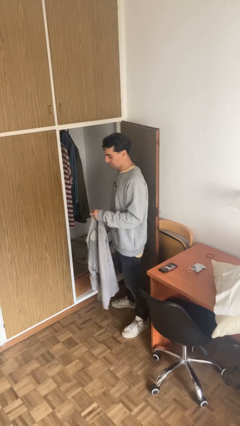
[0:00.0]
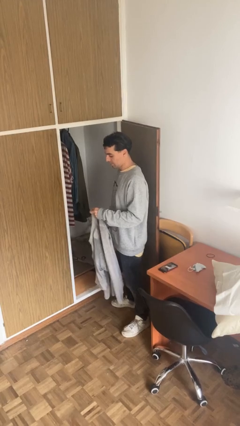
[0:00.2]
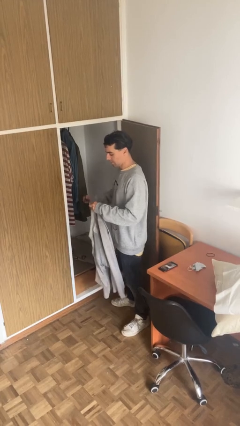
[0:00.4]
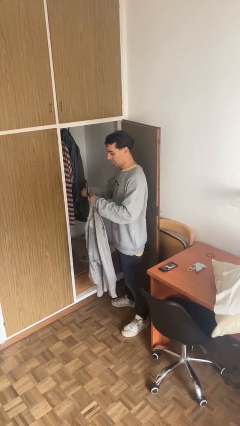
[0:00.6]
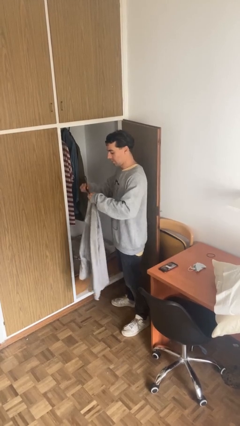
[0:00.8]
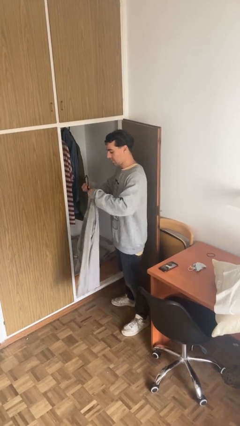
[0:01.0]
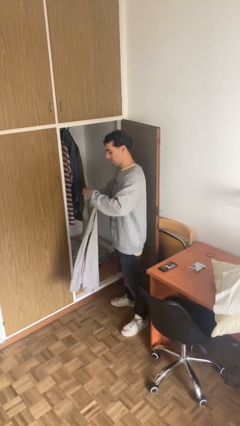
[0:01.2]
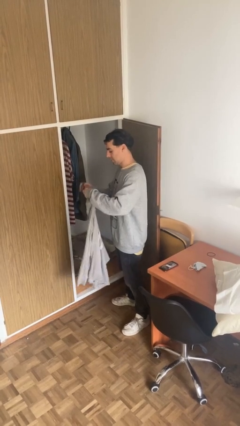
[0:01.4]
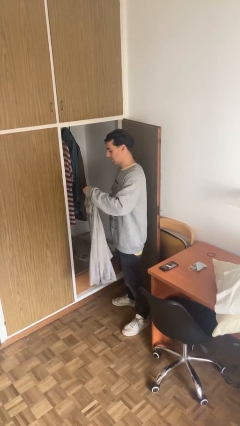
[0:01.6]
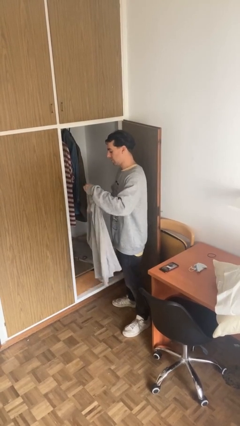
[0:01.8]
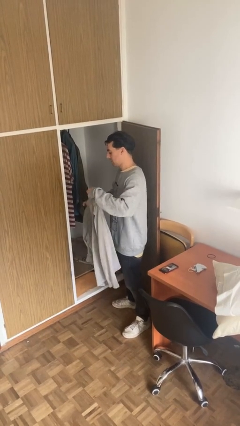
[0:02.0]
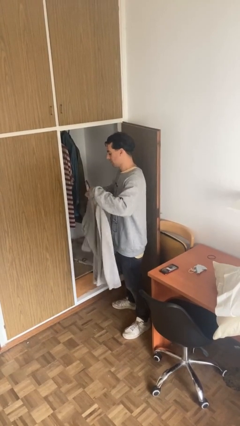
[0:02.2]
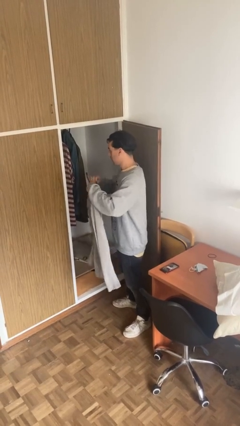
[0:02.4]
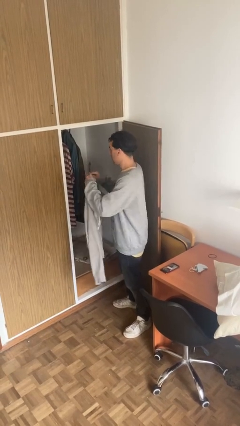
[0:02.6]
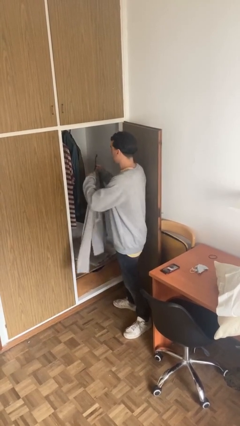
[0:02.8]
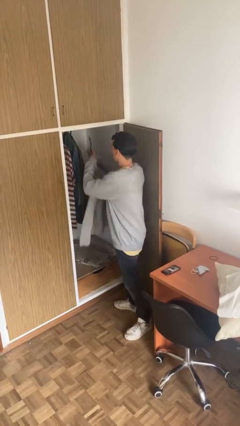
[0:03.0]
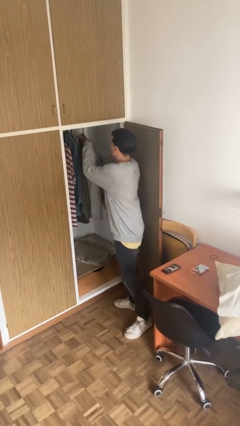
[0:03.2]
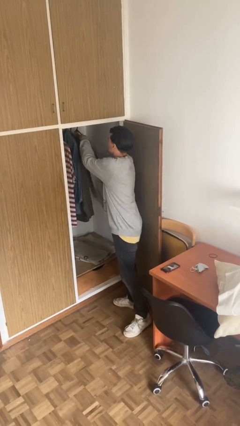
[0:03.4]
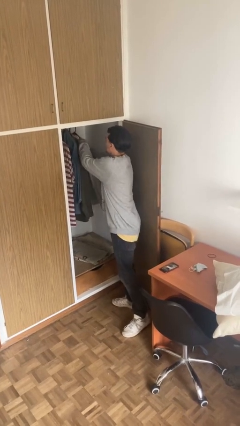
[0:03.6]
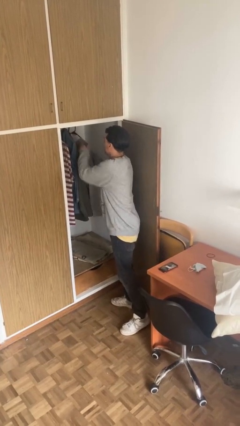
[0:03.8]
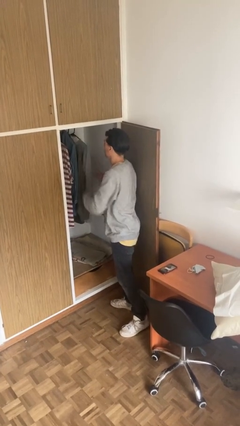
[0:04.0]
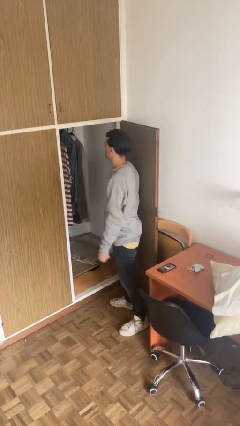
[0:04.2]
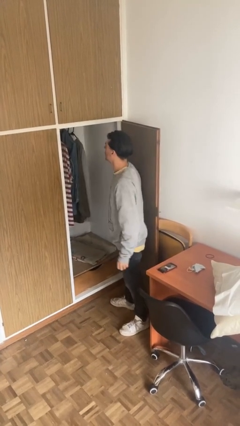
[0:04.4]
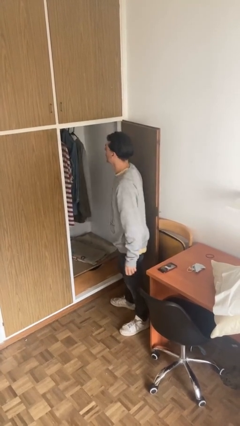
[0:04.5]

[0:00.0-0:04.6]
person puts clothes into closet

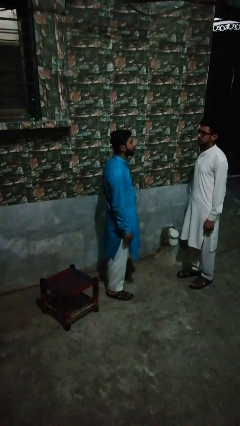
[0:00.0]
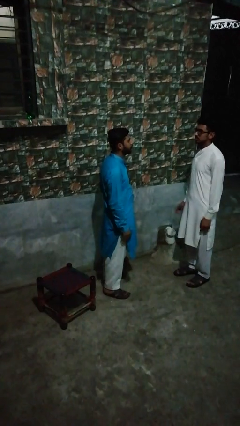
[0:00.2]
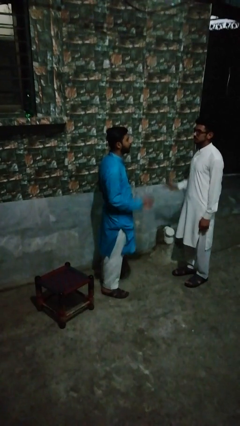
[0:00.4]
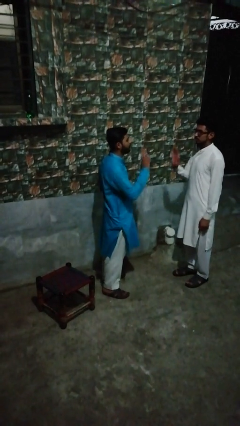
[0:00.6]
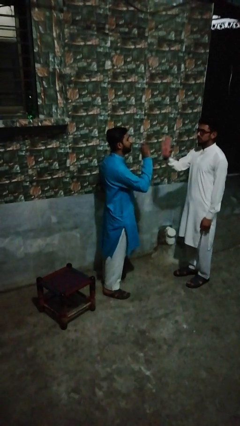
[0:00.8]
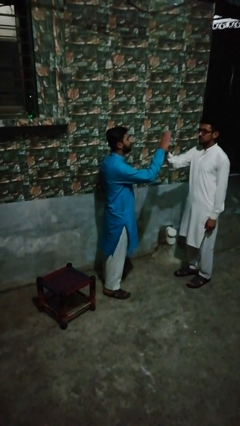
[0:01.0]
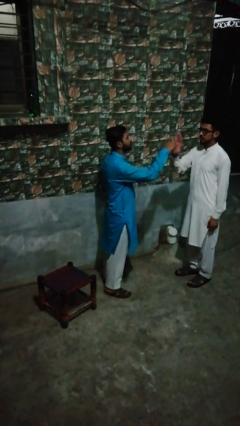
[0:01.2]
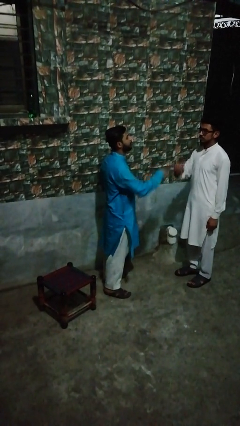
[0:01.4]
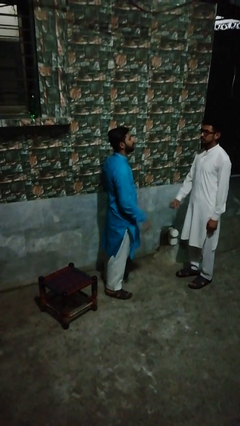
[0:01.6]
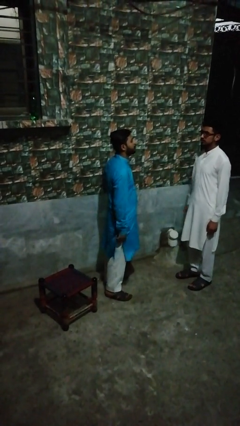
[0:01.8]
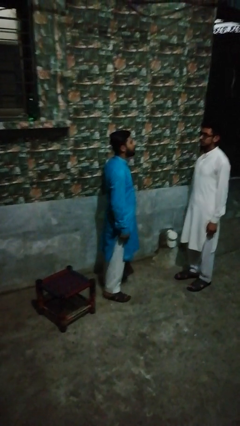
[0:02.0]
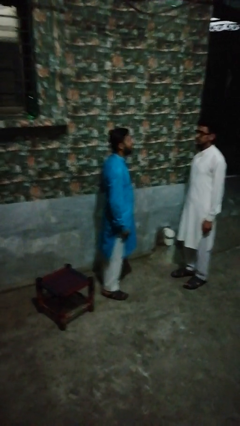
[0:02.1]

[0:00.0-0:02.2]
person highfives hand

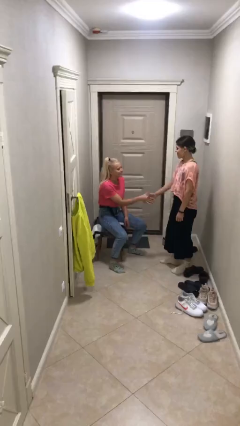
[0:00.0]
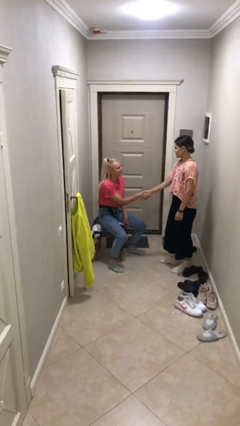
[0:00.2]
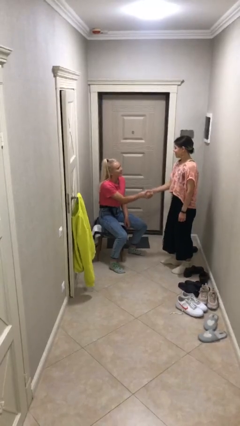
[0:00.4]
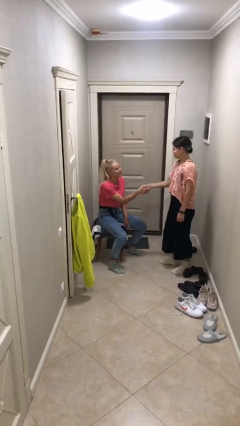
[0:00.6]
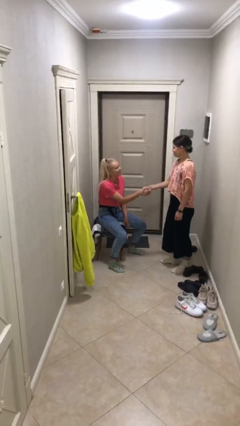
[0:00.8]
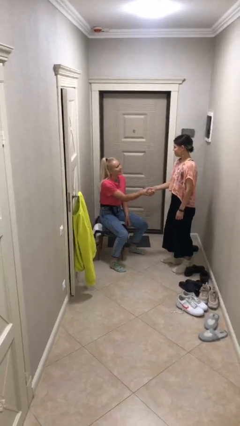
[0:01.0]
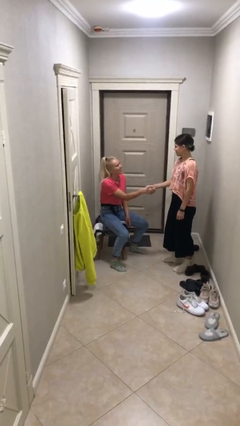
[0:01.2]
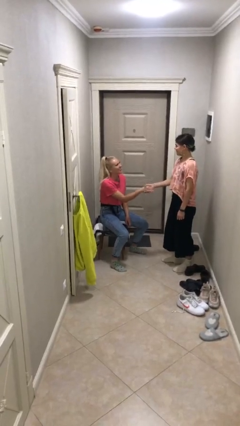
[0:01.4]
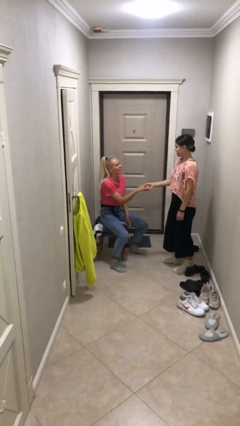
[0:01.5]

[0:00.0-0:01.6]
person shakes hand

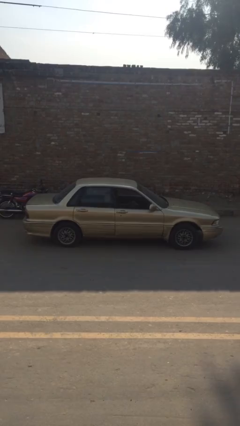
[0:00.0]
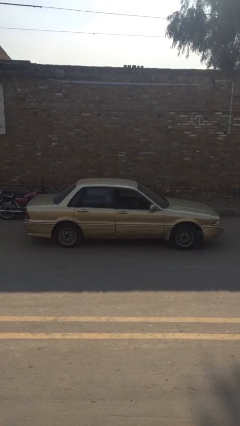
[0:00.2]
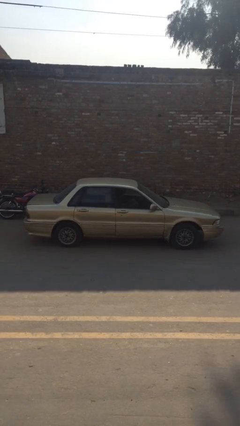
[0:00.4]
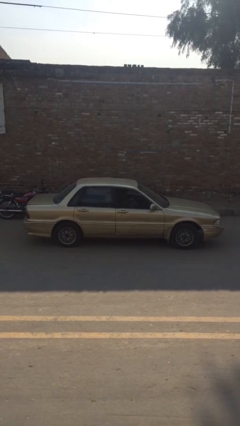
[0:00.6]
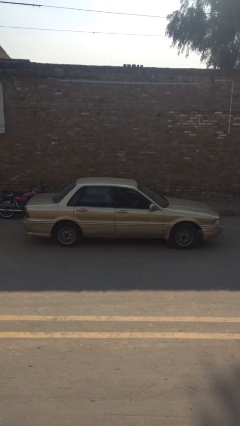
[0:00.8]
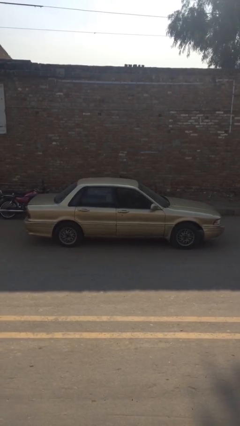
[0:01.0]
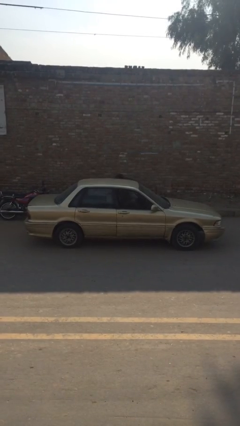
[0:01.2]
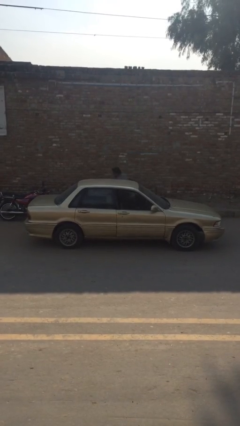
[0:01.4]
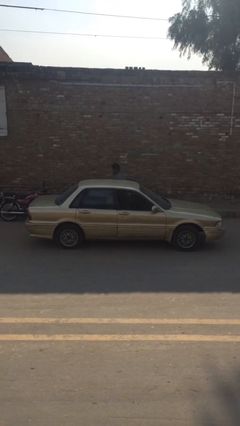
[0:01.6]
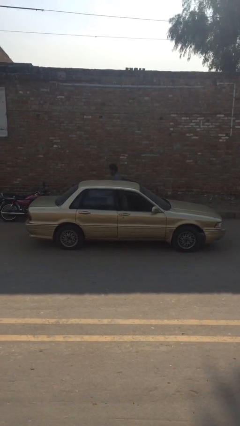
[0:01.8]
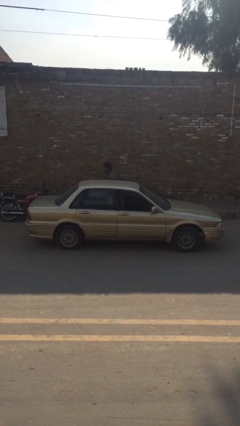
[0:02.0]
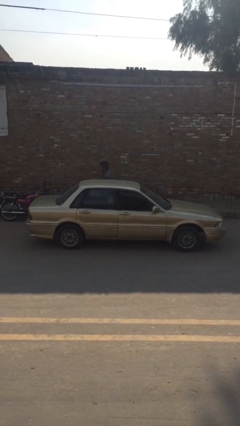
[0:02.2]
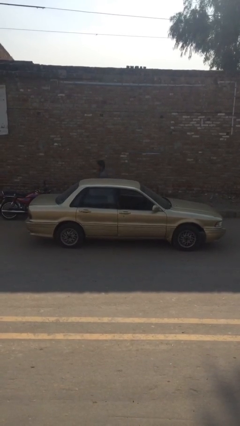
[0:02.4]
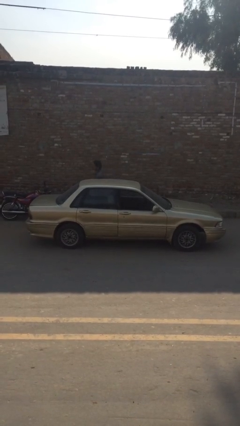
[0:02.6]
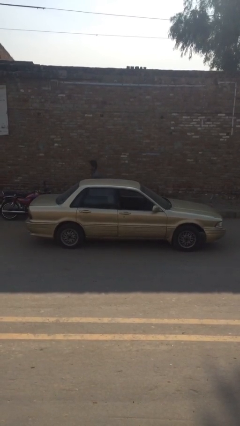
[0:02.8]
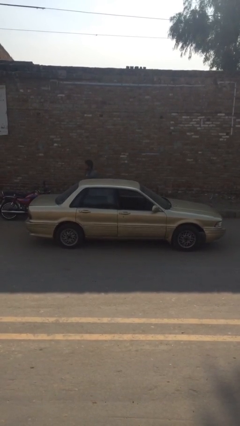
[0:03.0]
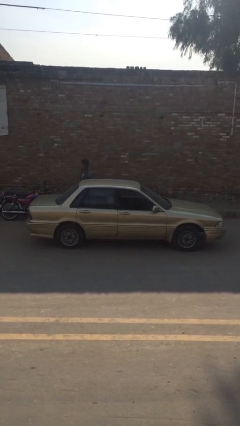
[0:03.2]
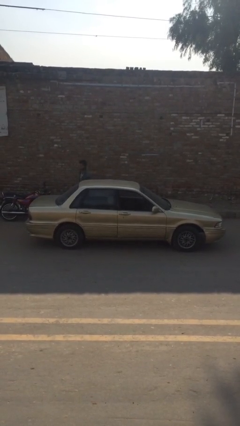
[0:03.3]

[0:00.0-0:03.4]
car drops off person

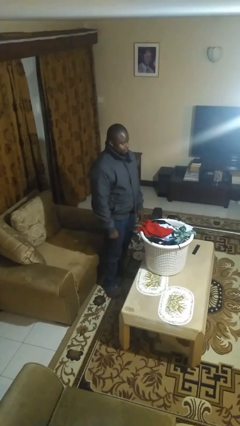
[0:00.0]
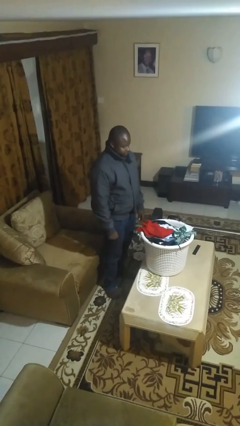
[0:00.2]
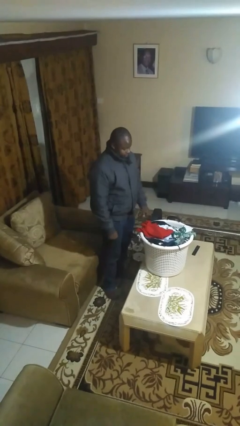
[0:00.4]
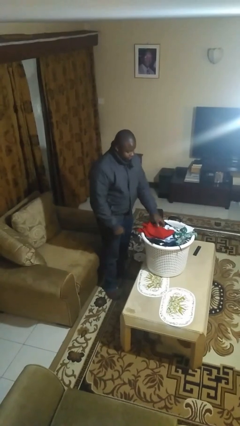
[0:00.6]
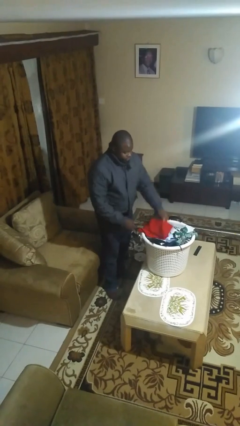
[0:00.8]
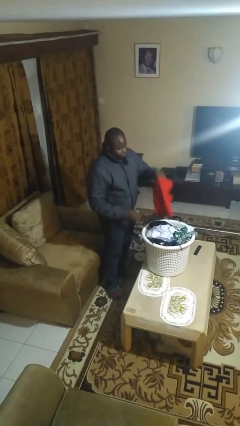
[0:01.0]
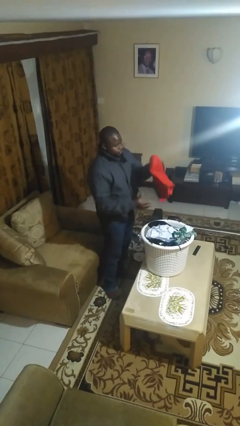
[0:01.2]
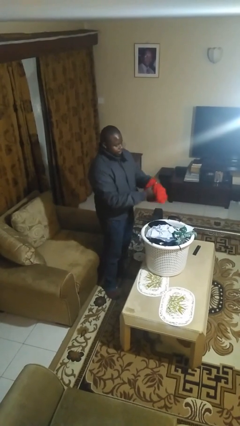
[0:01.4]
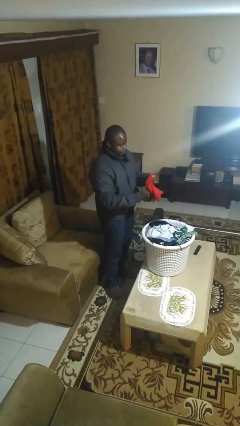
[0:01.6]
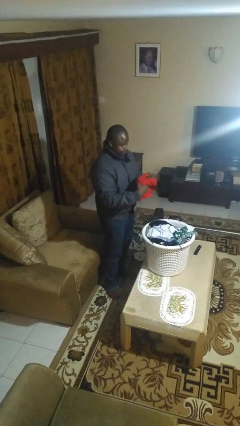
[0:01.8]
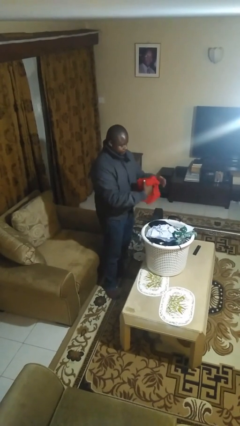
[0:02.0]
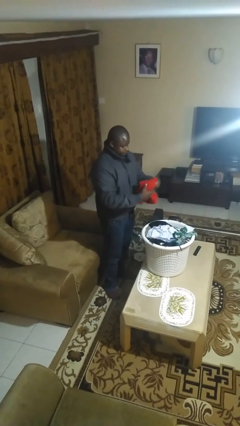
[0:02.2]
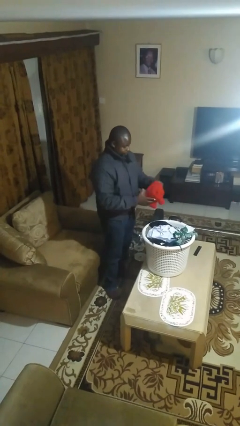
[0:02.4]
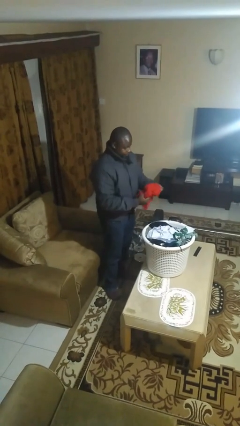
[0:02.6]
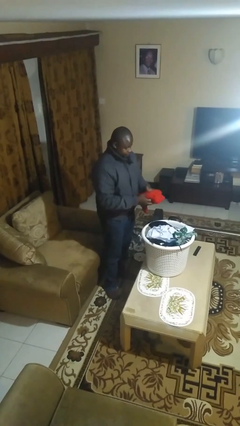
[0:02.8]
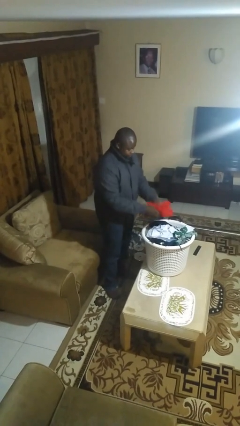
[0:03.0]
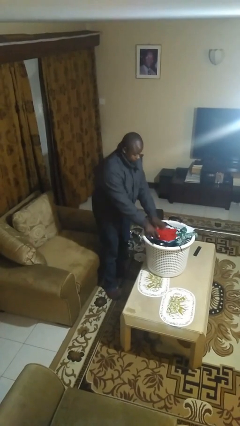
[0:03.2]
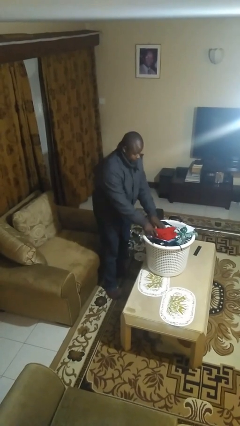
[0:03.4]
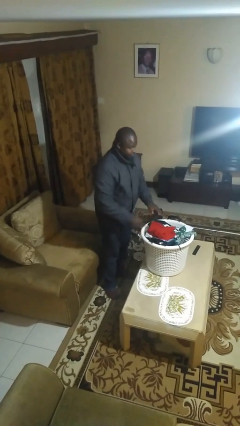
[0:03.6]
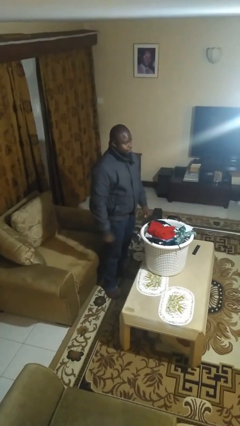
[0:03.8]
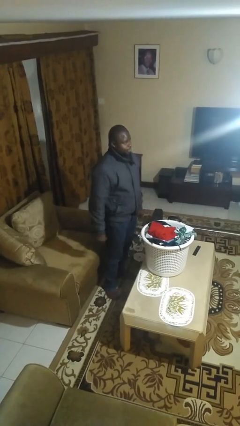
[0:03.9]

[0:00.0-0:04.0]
person folds shirt

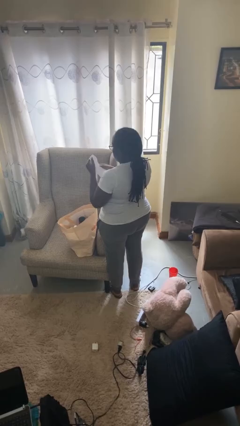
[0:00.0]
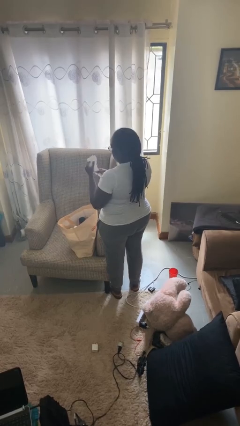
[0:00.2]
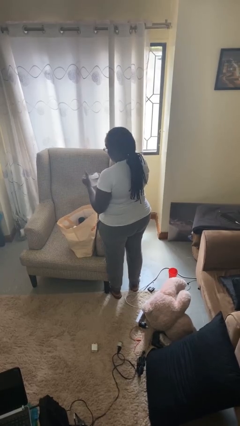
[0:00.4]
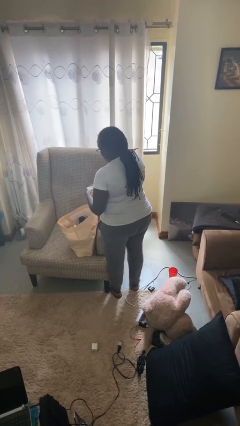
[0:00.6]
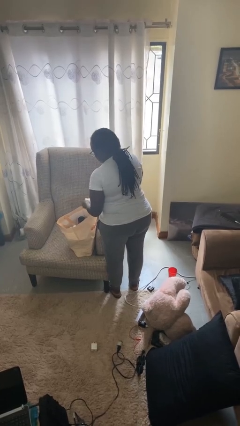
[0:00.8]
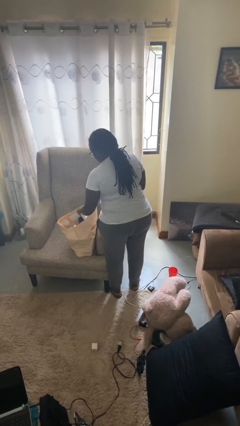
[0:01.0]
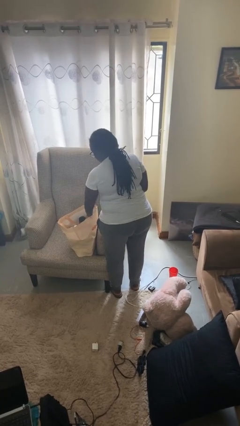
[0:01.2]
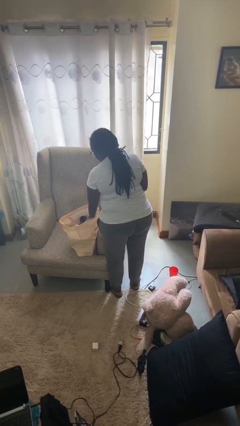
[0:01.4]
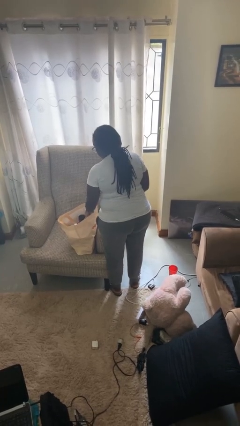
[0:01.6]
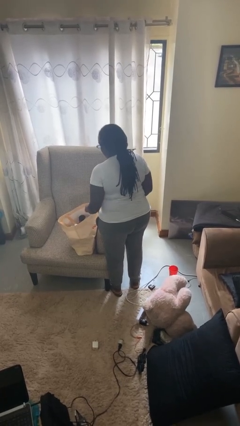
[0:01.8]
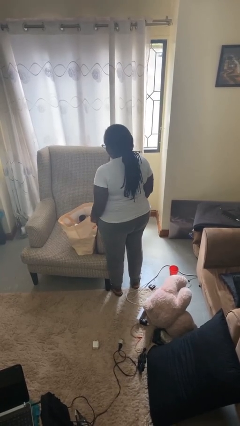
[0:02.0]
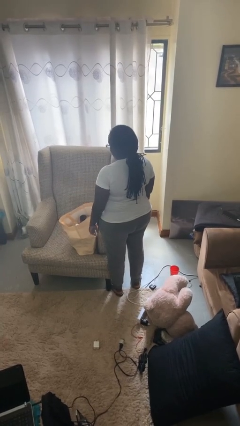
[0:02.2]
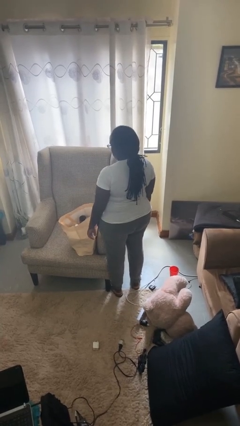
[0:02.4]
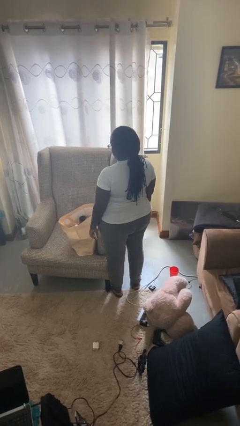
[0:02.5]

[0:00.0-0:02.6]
person puts object into bag
